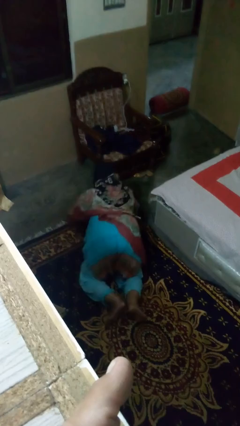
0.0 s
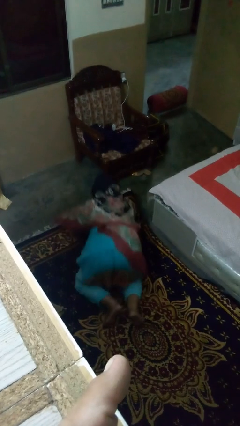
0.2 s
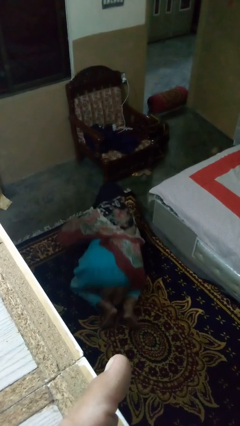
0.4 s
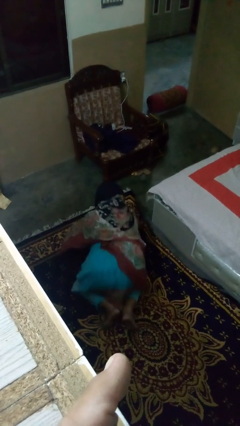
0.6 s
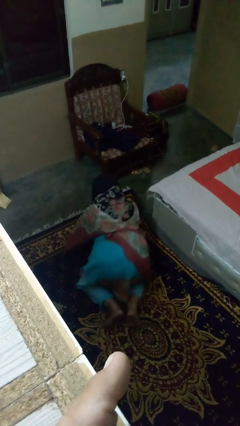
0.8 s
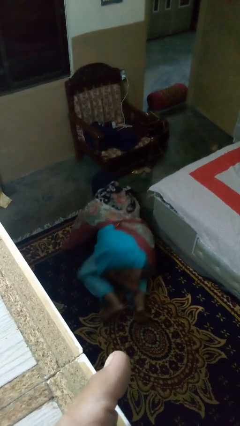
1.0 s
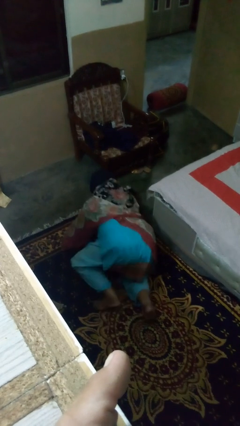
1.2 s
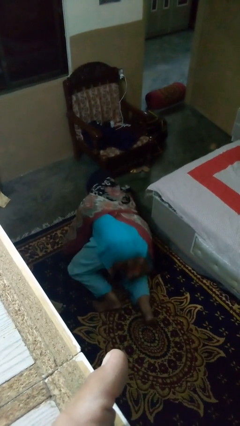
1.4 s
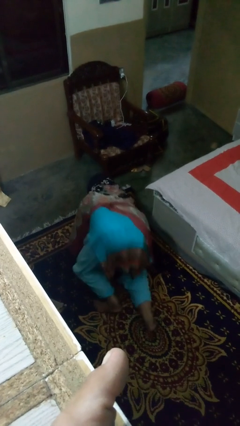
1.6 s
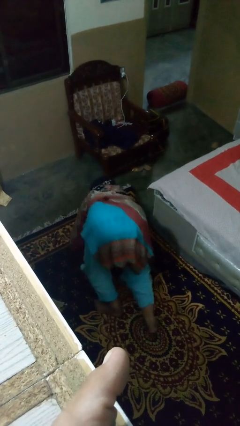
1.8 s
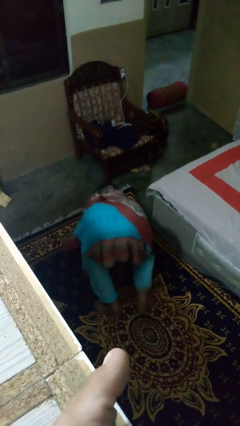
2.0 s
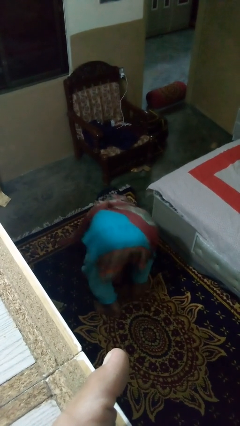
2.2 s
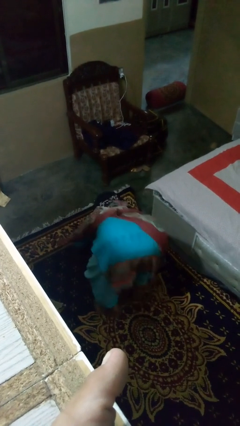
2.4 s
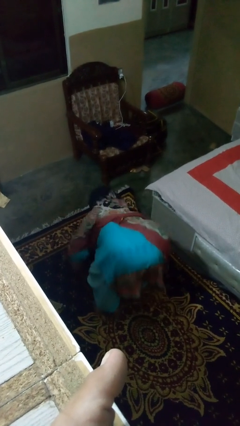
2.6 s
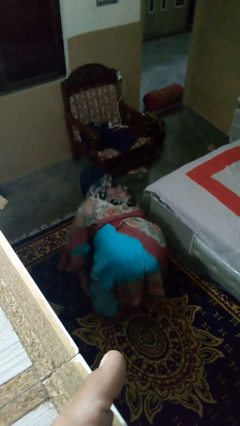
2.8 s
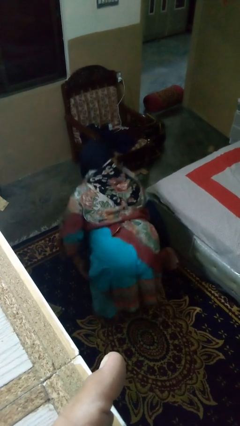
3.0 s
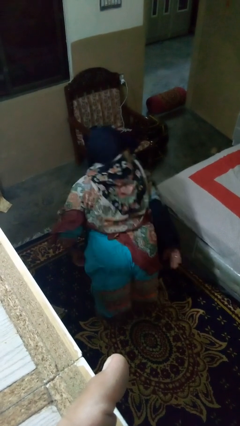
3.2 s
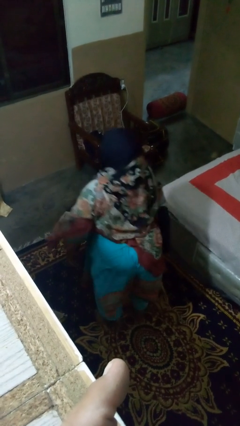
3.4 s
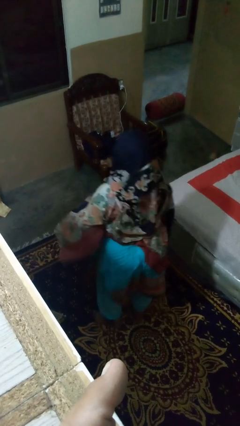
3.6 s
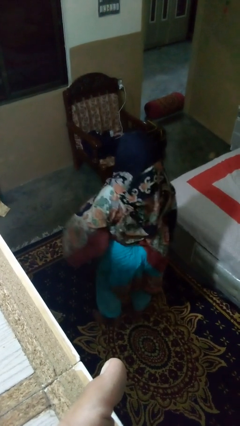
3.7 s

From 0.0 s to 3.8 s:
person exercises with pushup

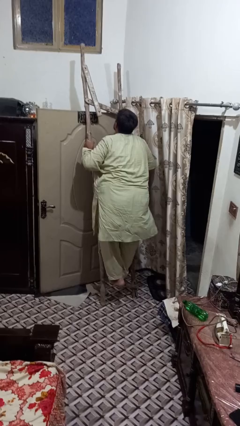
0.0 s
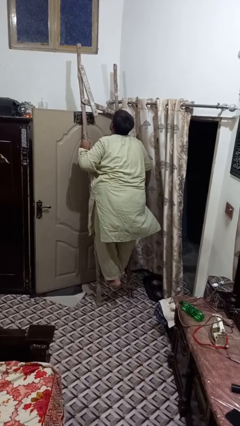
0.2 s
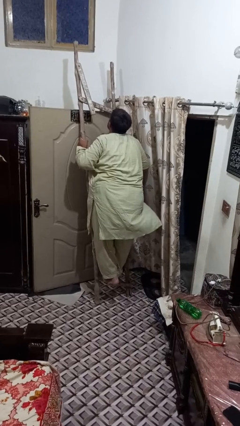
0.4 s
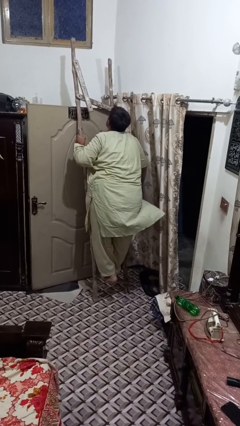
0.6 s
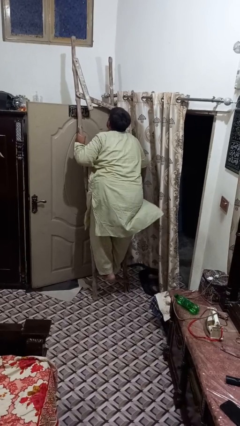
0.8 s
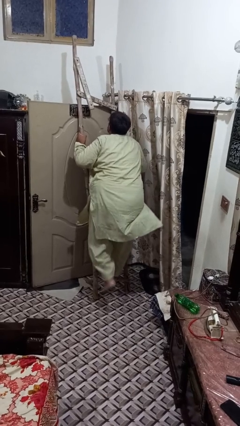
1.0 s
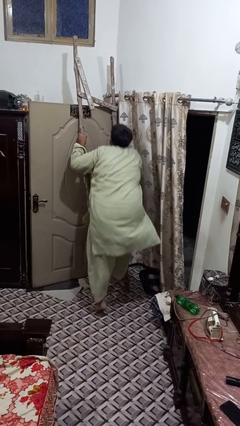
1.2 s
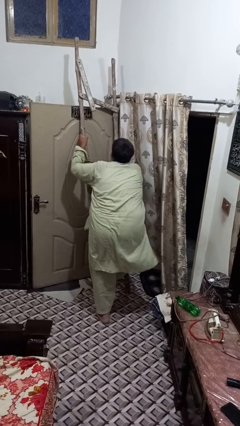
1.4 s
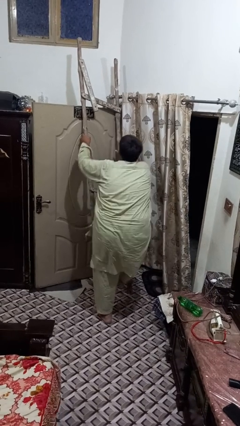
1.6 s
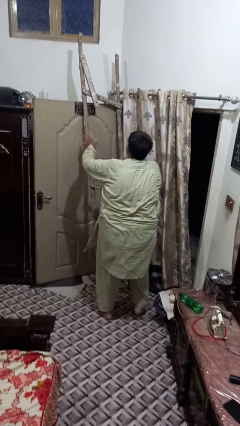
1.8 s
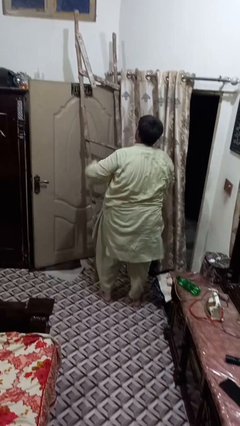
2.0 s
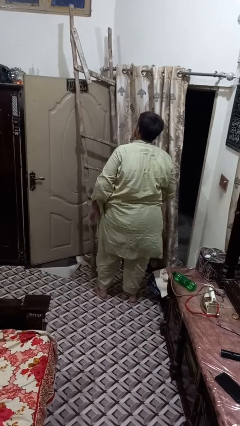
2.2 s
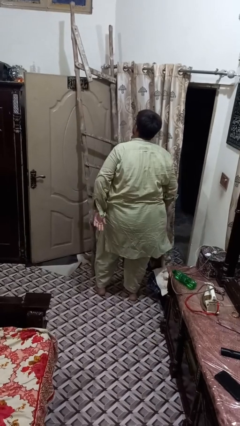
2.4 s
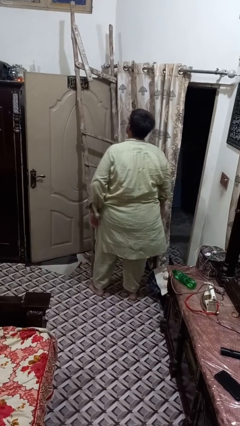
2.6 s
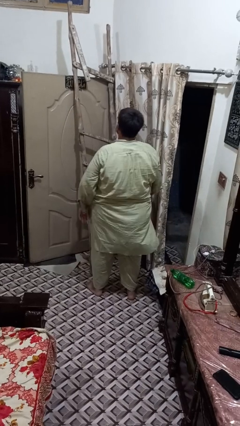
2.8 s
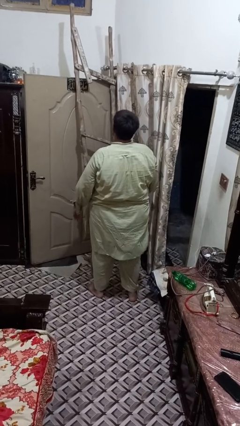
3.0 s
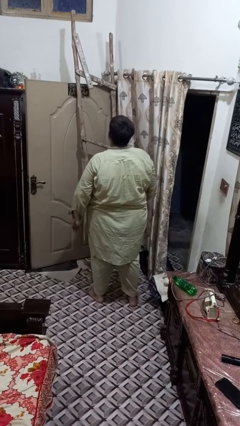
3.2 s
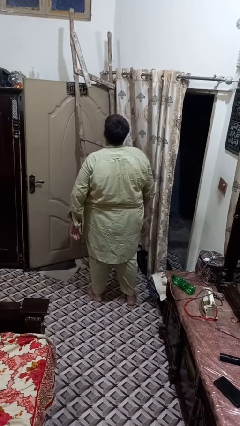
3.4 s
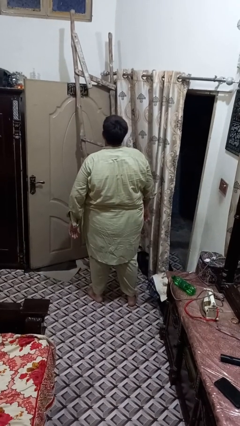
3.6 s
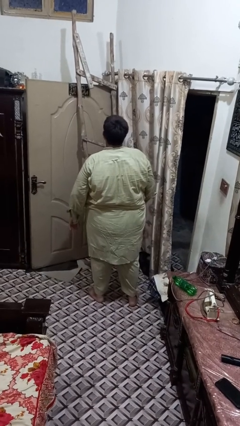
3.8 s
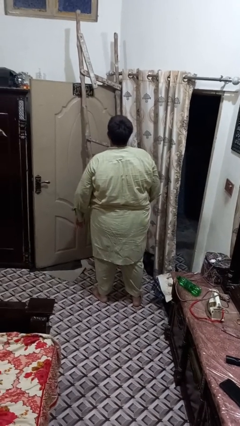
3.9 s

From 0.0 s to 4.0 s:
person climbs down ladder

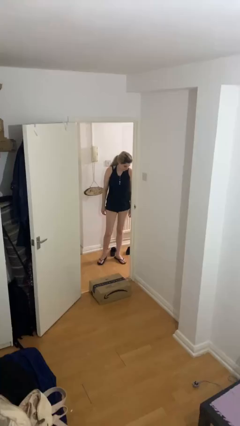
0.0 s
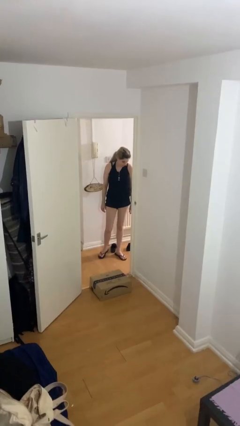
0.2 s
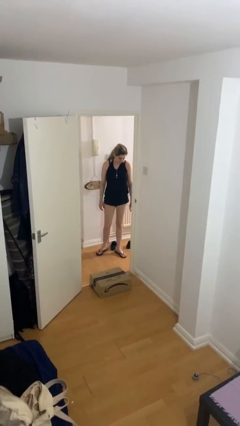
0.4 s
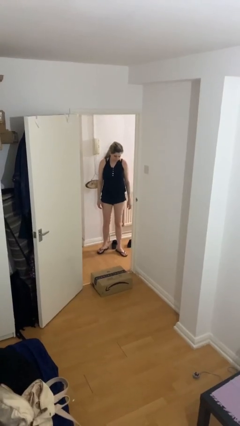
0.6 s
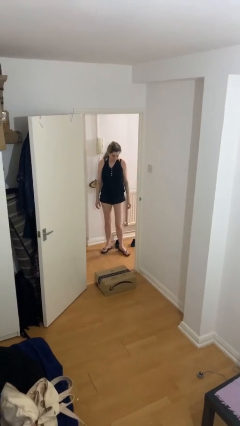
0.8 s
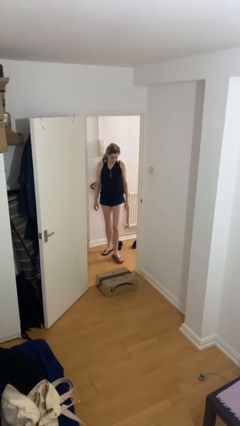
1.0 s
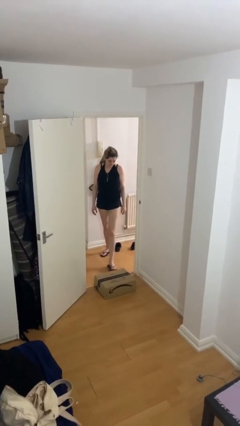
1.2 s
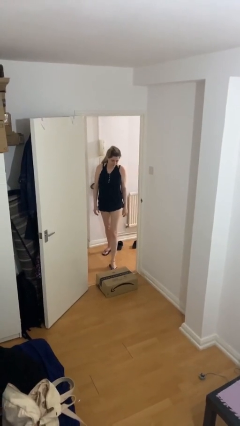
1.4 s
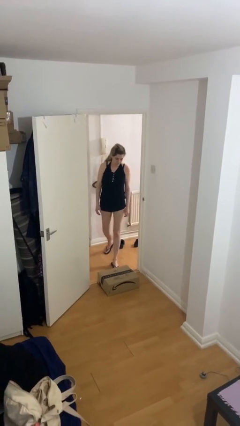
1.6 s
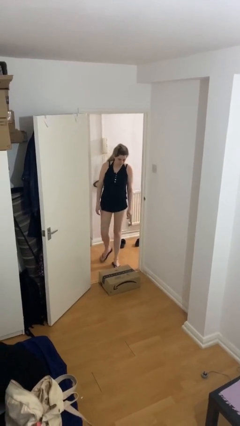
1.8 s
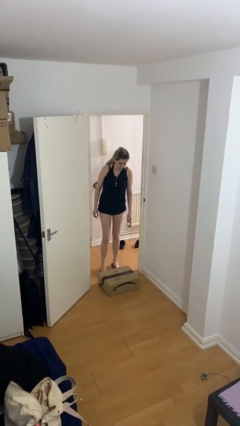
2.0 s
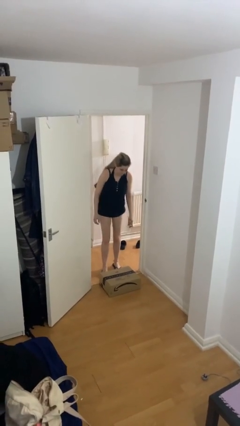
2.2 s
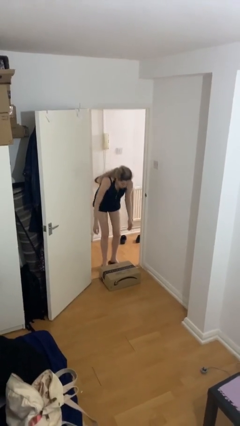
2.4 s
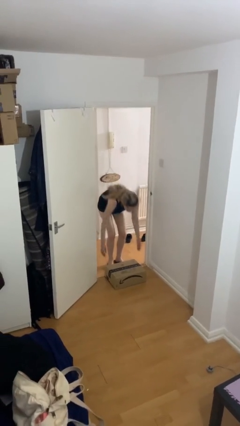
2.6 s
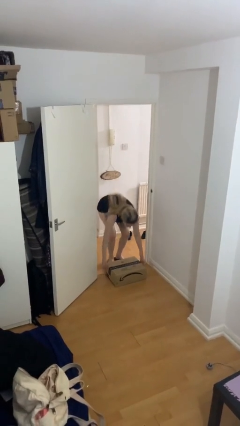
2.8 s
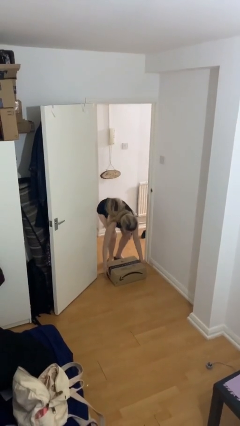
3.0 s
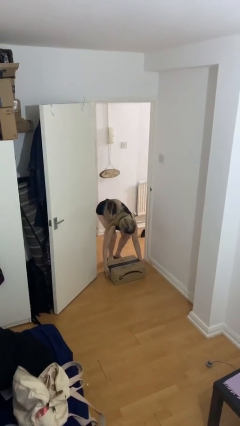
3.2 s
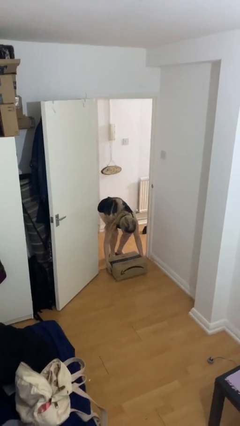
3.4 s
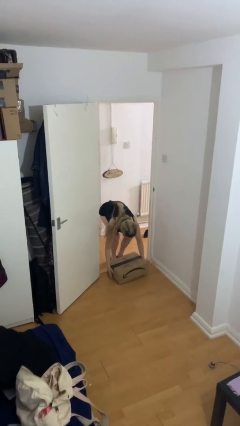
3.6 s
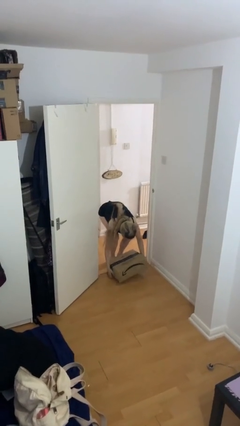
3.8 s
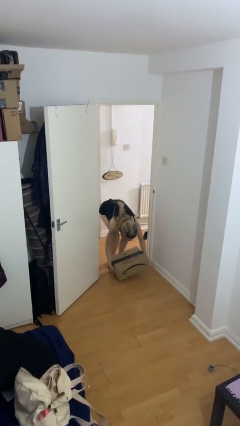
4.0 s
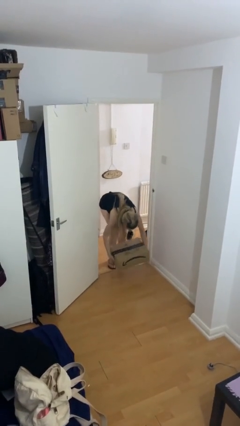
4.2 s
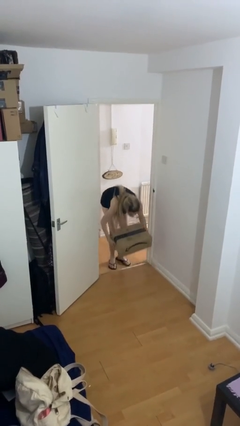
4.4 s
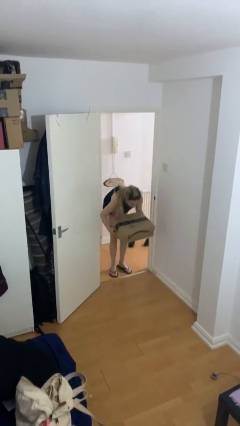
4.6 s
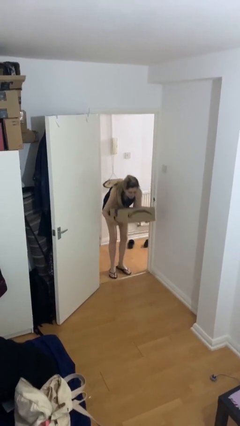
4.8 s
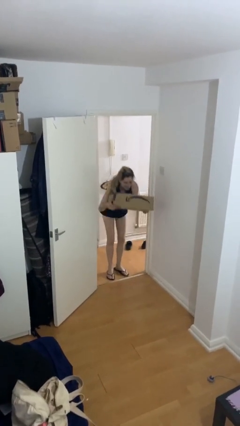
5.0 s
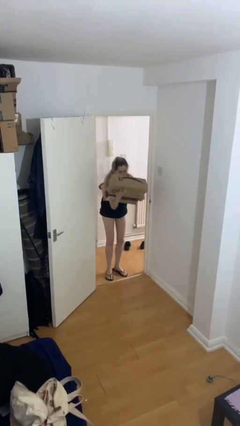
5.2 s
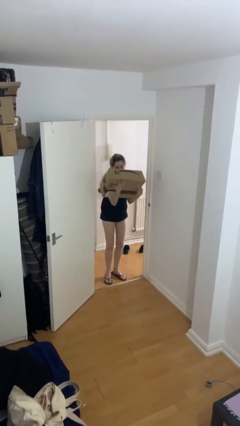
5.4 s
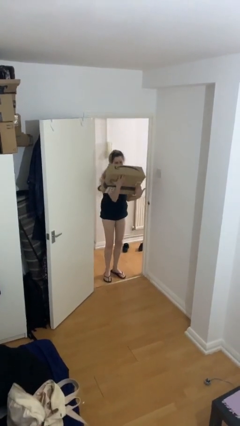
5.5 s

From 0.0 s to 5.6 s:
person picks up object from floor

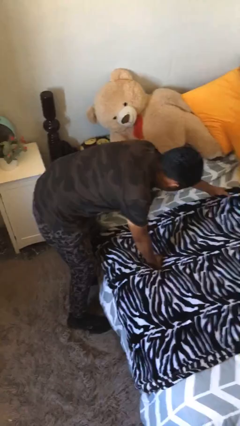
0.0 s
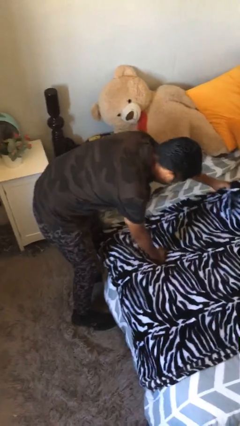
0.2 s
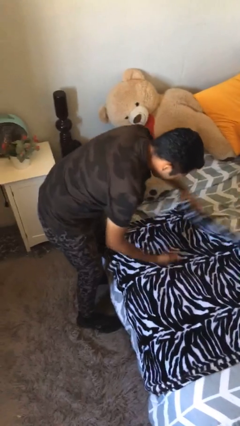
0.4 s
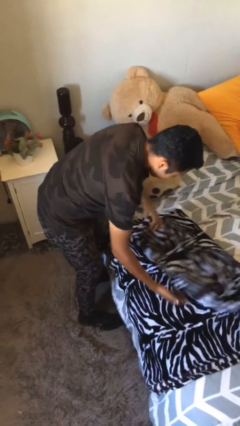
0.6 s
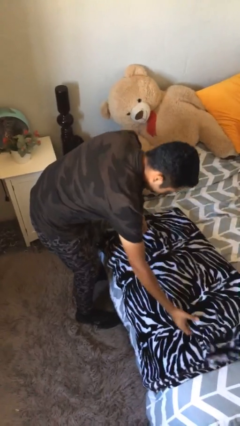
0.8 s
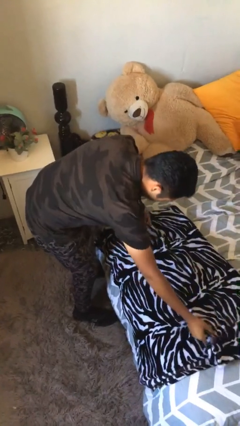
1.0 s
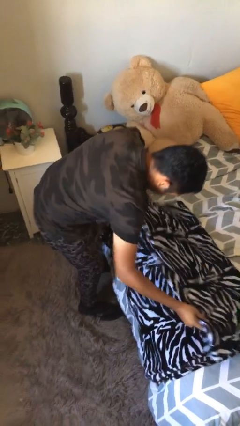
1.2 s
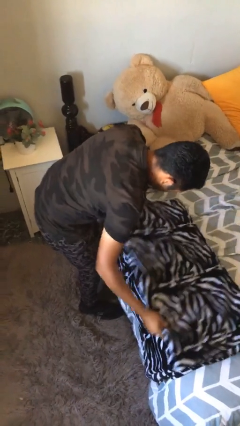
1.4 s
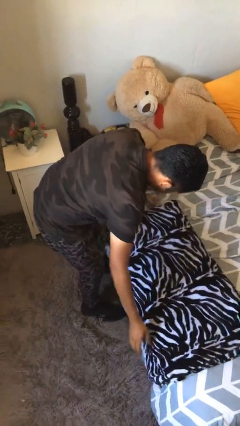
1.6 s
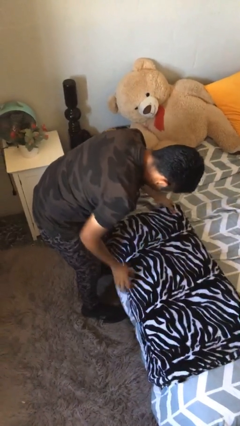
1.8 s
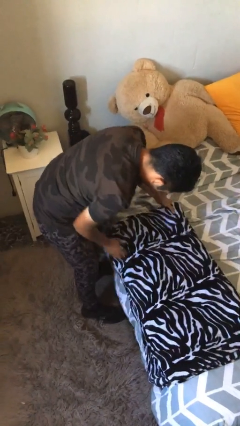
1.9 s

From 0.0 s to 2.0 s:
person folds blanket

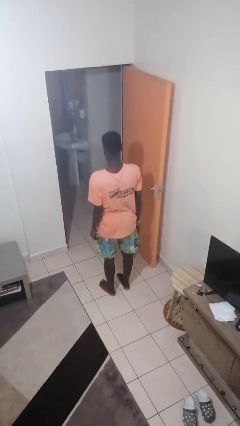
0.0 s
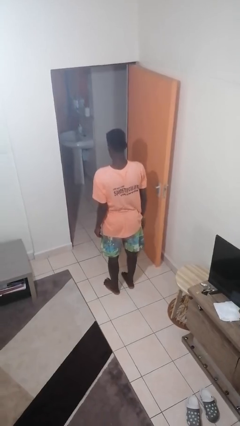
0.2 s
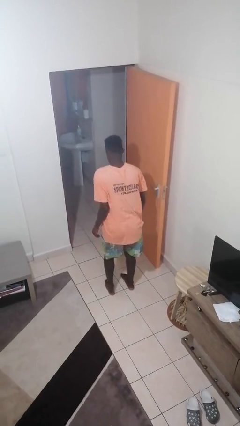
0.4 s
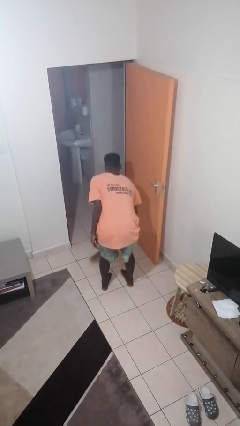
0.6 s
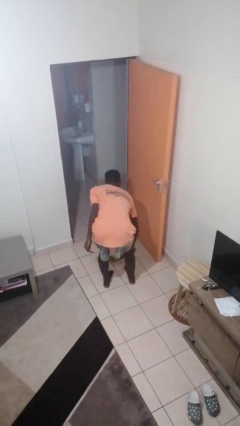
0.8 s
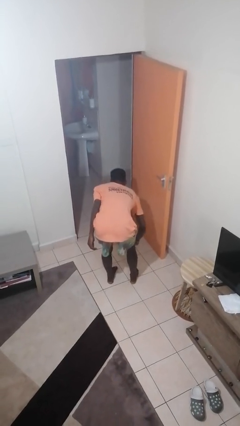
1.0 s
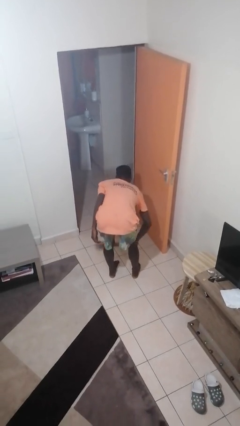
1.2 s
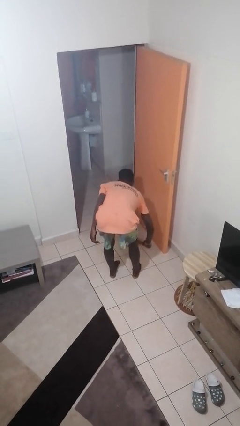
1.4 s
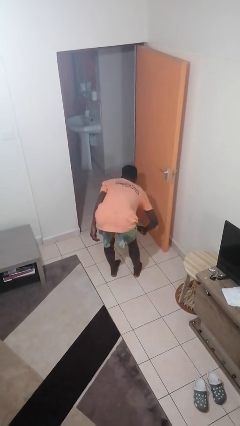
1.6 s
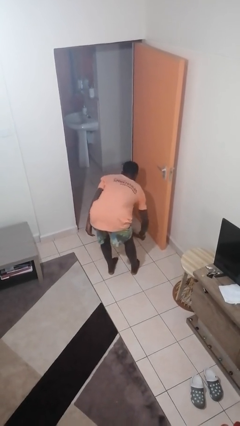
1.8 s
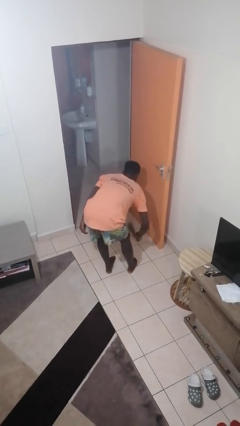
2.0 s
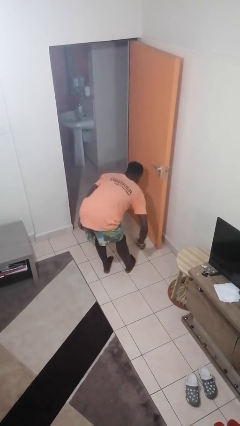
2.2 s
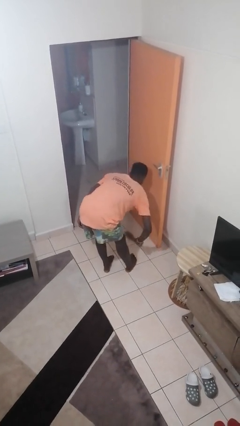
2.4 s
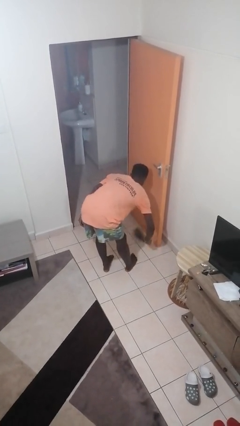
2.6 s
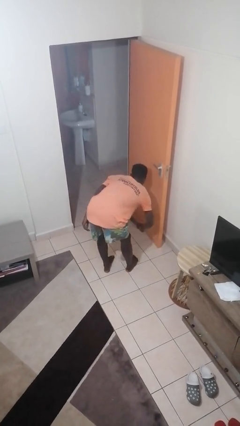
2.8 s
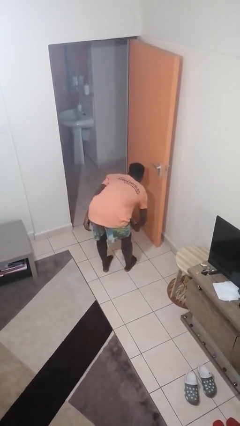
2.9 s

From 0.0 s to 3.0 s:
person sweeps floor
